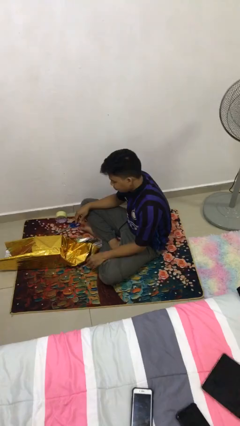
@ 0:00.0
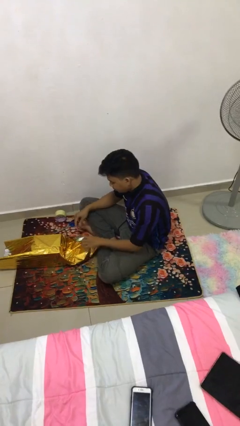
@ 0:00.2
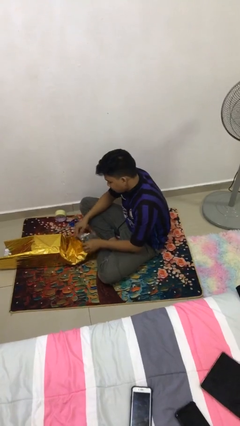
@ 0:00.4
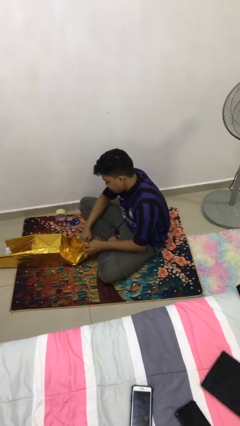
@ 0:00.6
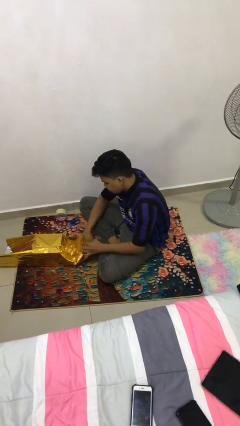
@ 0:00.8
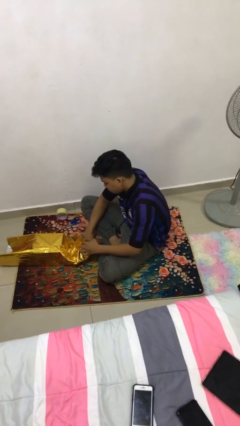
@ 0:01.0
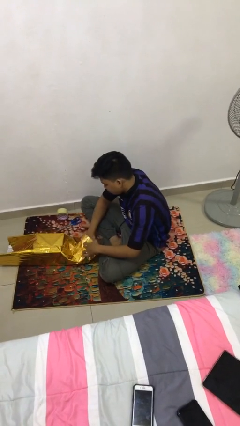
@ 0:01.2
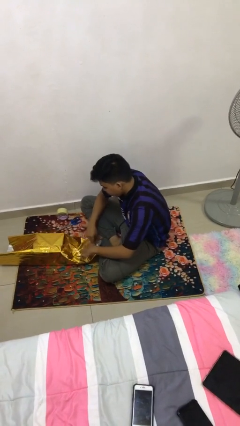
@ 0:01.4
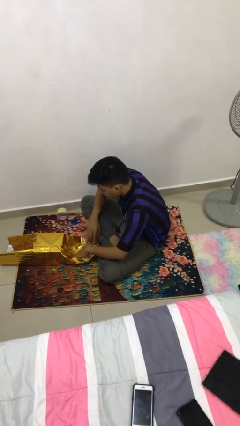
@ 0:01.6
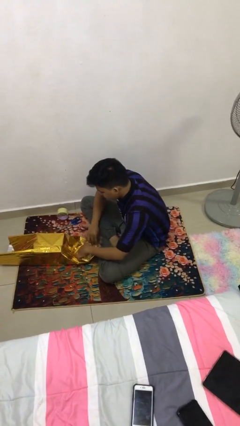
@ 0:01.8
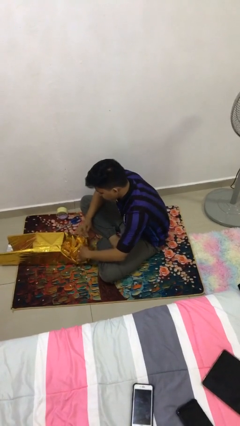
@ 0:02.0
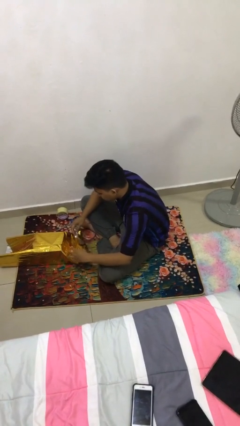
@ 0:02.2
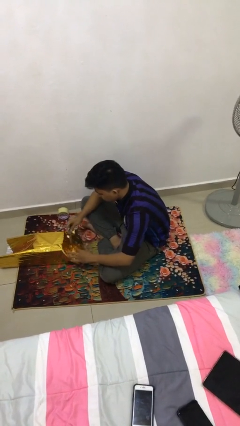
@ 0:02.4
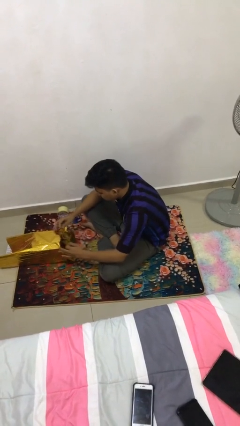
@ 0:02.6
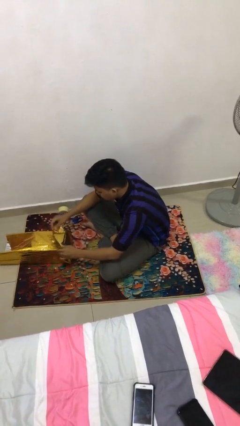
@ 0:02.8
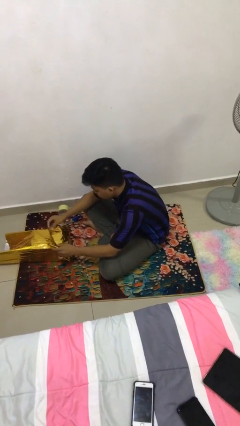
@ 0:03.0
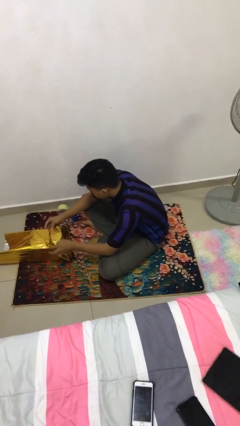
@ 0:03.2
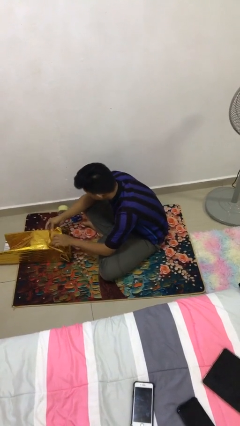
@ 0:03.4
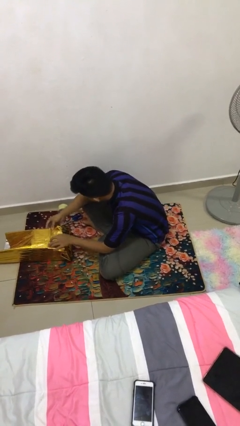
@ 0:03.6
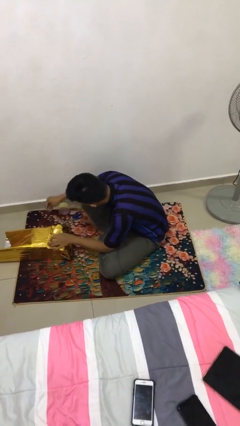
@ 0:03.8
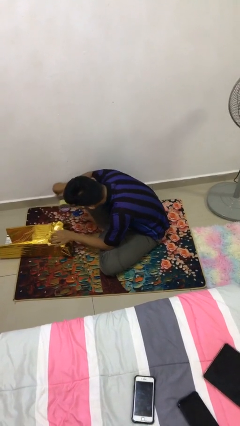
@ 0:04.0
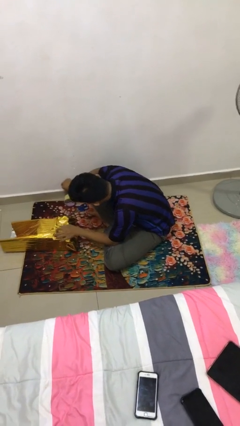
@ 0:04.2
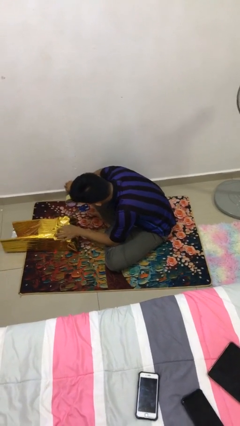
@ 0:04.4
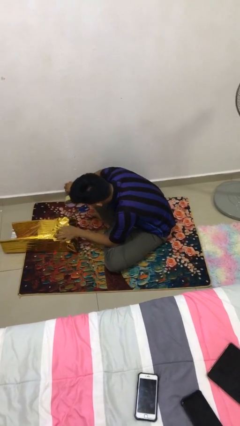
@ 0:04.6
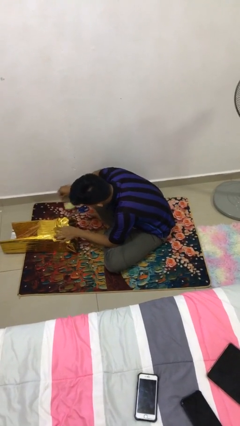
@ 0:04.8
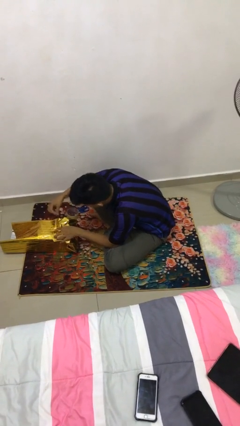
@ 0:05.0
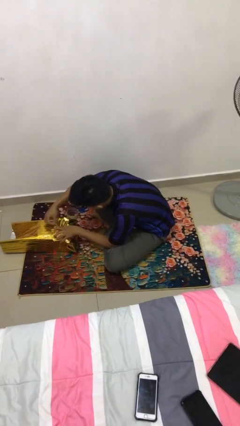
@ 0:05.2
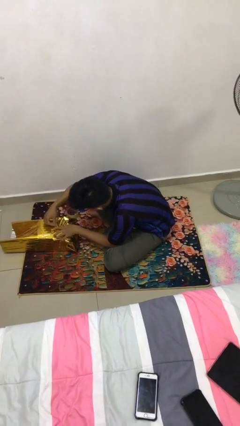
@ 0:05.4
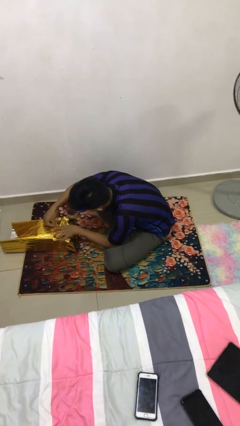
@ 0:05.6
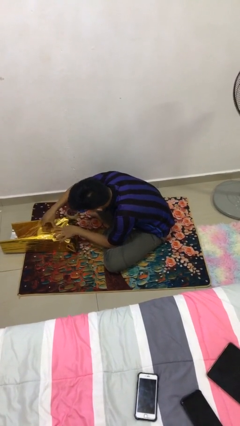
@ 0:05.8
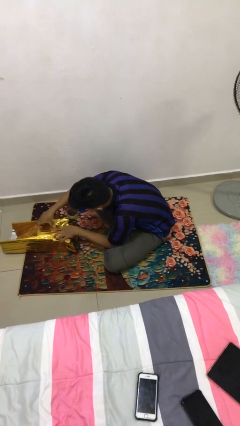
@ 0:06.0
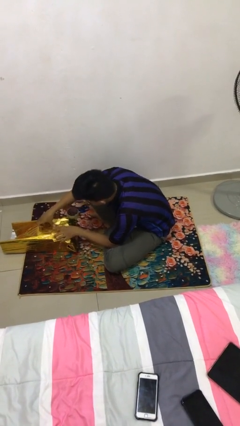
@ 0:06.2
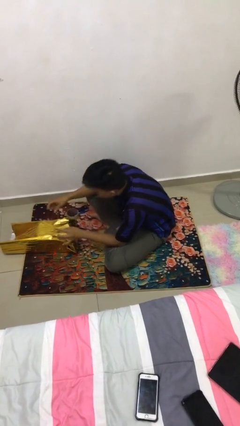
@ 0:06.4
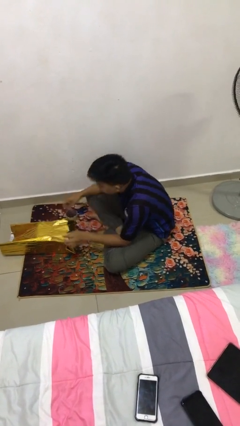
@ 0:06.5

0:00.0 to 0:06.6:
person wraps box

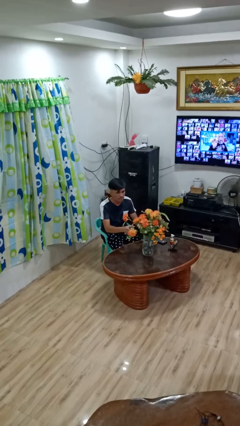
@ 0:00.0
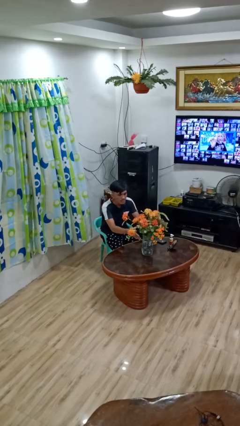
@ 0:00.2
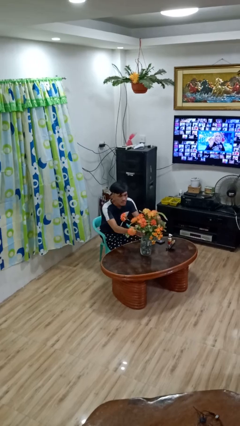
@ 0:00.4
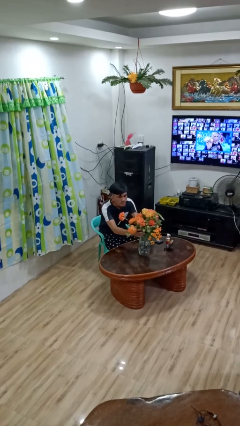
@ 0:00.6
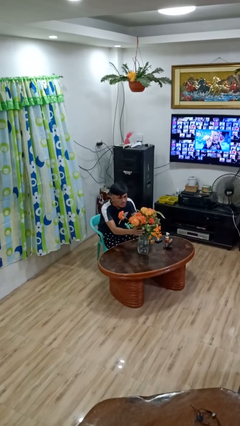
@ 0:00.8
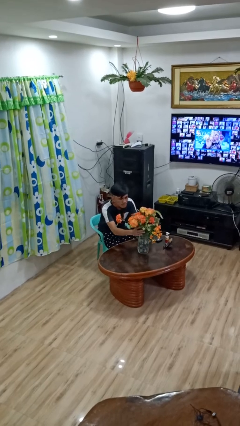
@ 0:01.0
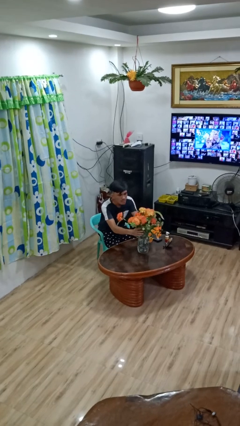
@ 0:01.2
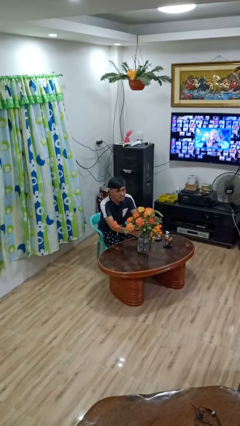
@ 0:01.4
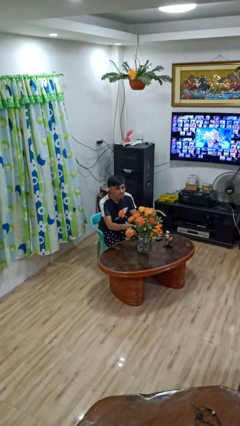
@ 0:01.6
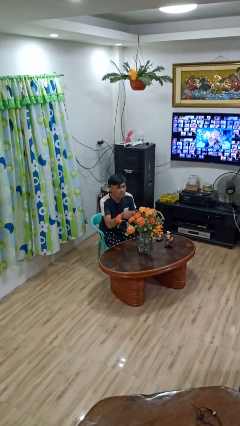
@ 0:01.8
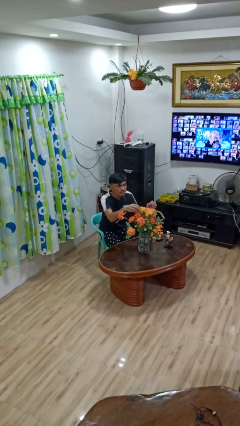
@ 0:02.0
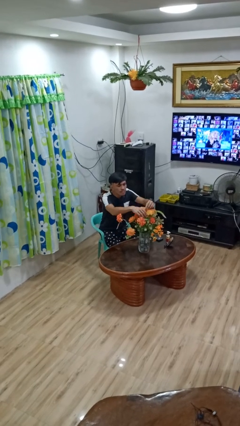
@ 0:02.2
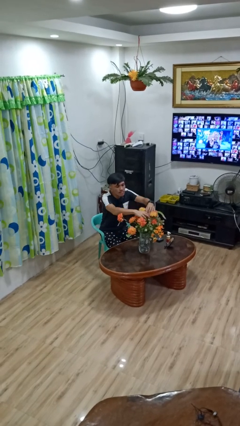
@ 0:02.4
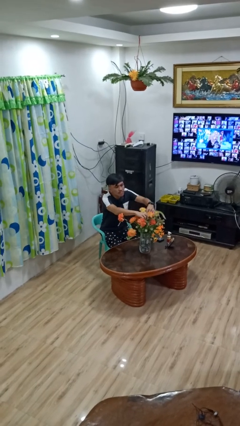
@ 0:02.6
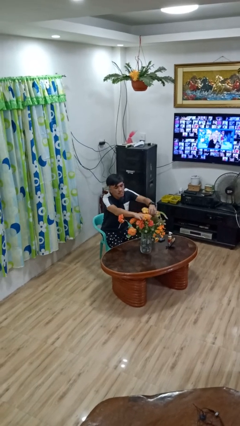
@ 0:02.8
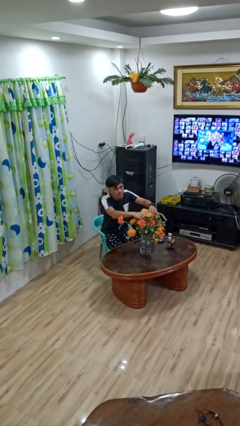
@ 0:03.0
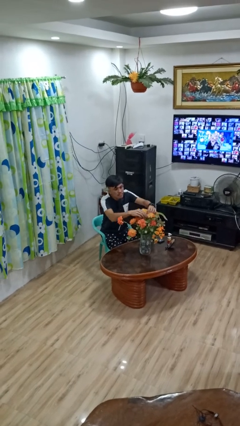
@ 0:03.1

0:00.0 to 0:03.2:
person arranges flowers in vase

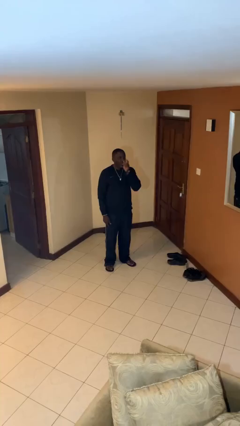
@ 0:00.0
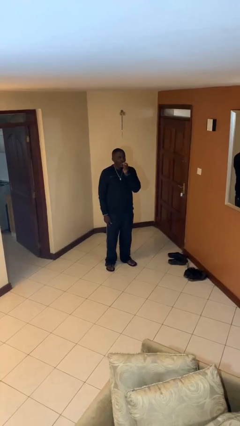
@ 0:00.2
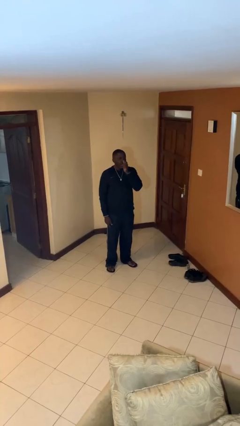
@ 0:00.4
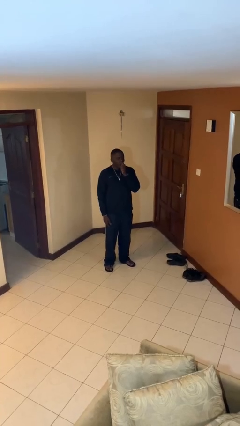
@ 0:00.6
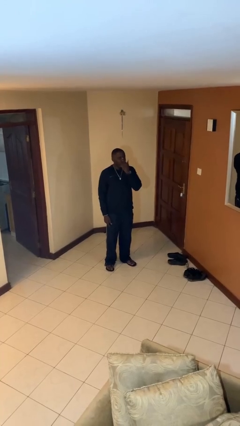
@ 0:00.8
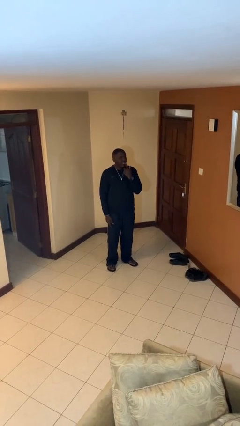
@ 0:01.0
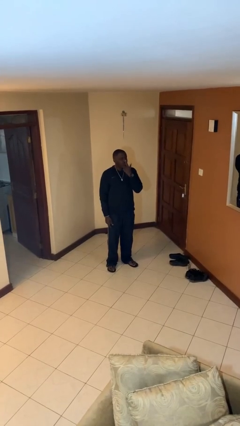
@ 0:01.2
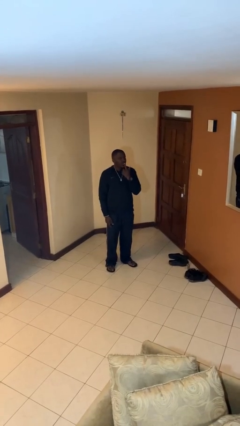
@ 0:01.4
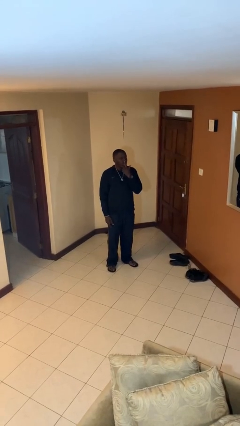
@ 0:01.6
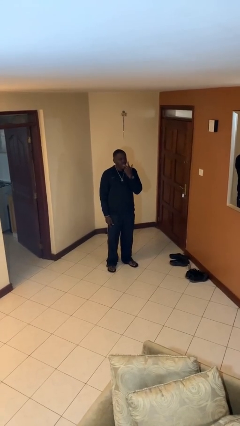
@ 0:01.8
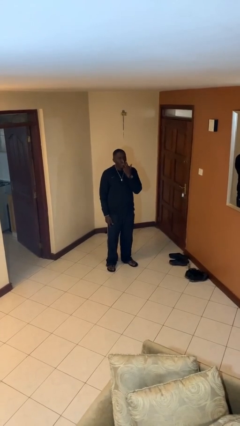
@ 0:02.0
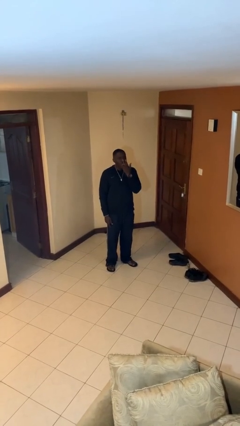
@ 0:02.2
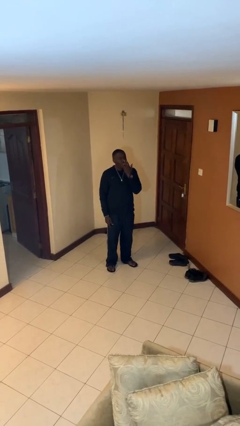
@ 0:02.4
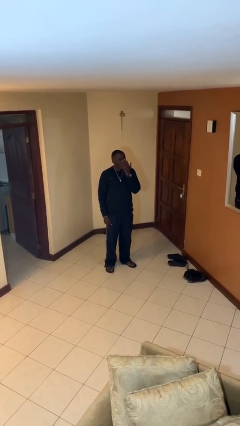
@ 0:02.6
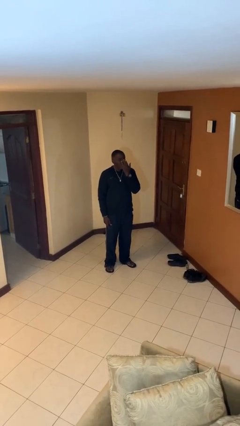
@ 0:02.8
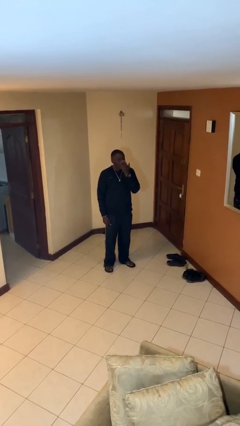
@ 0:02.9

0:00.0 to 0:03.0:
person licks fingers

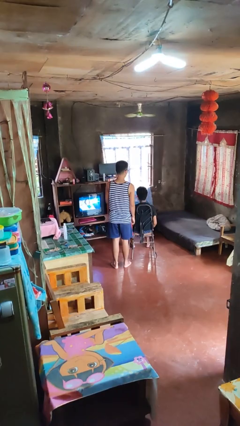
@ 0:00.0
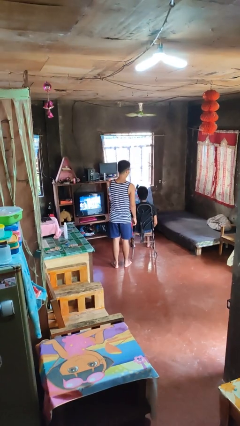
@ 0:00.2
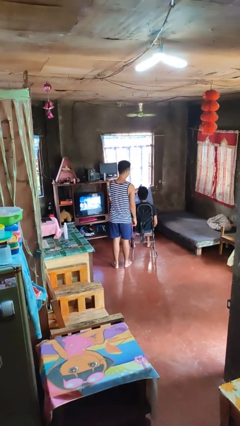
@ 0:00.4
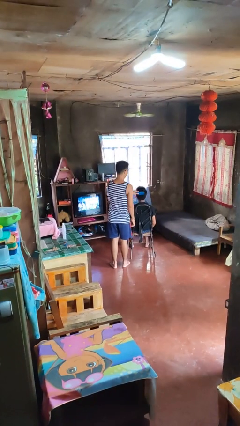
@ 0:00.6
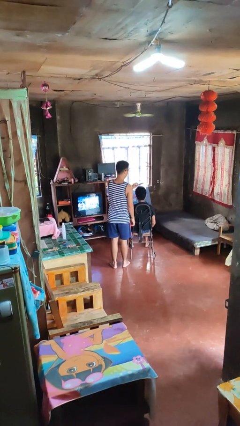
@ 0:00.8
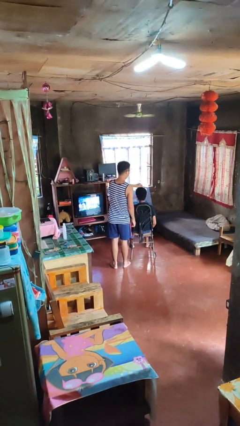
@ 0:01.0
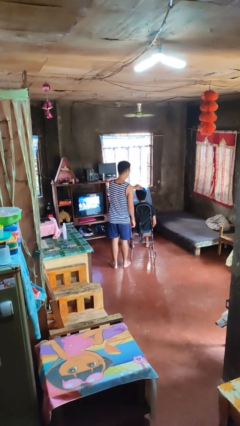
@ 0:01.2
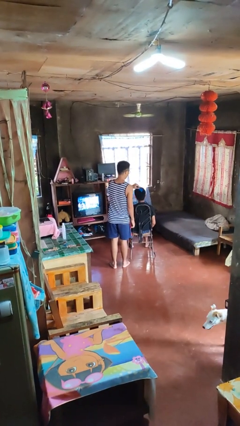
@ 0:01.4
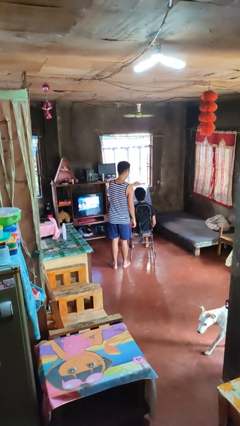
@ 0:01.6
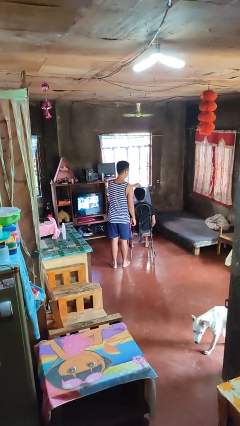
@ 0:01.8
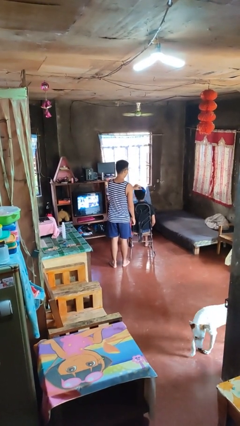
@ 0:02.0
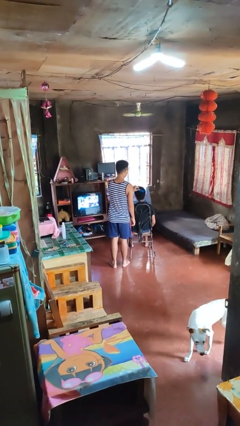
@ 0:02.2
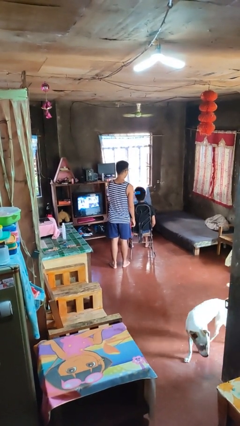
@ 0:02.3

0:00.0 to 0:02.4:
person brushes hair of person

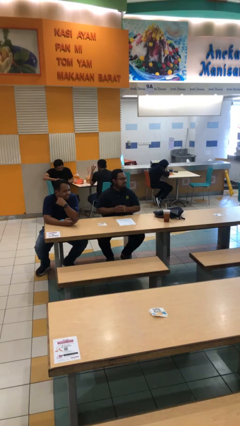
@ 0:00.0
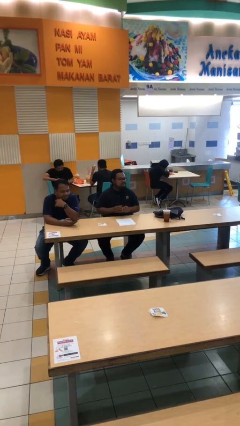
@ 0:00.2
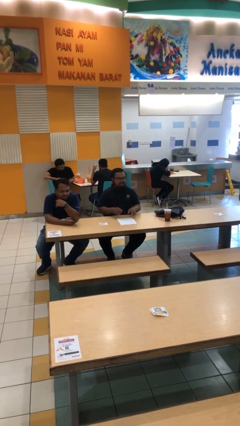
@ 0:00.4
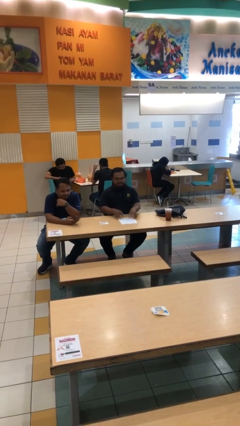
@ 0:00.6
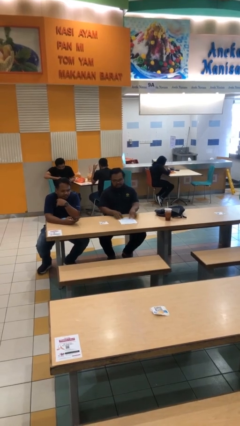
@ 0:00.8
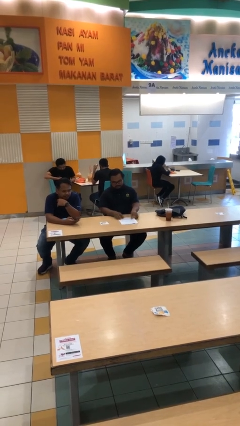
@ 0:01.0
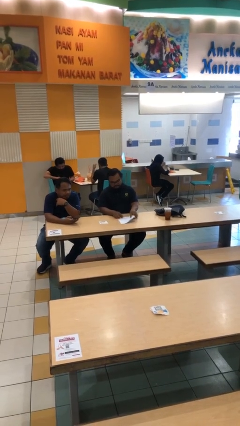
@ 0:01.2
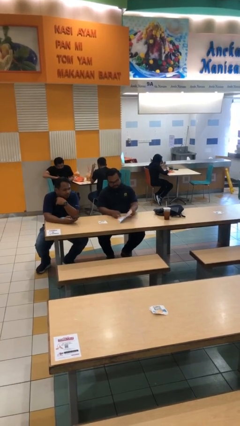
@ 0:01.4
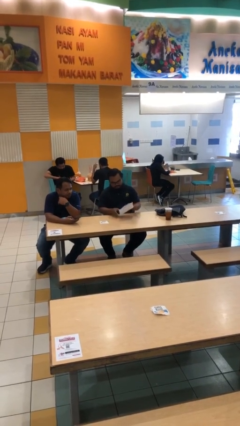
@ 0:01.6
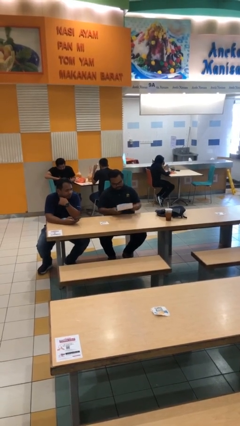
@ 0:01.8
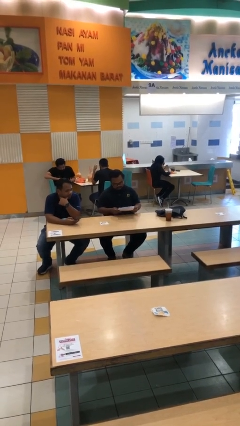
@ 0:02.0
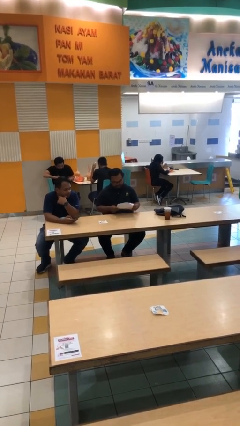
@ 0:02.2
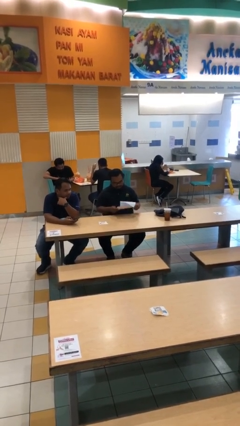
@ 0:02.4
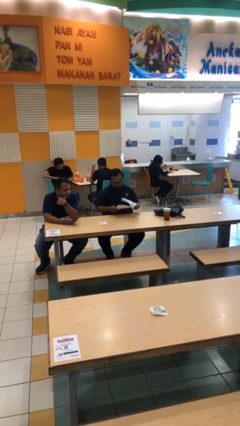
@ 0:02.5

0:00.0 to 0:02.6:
person picks up object from table
